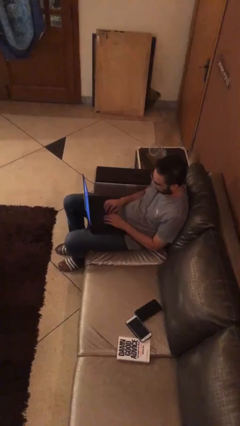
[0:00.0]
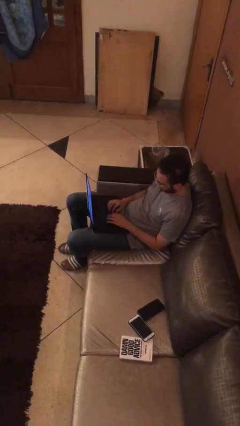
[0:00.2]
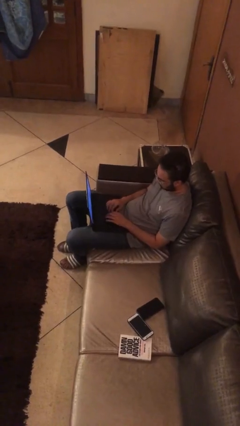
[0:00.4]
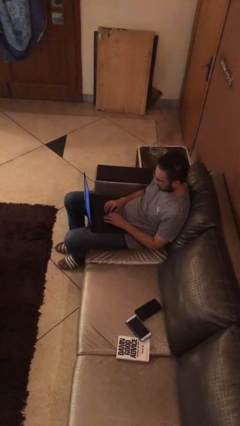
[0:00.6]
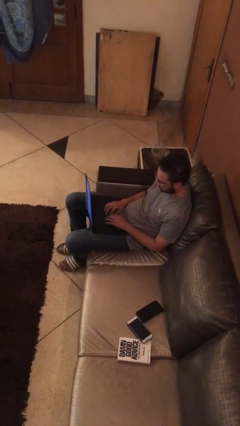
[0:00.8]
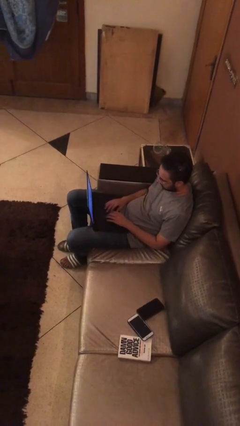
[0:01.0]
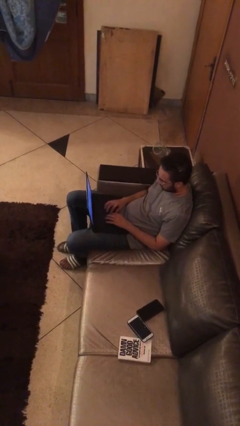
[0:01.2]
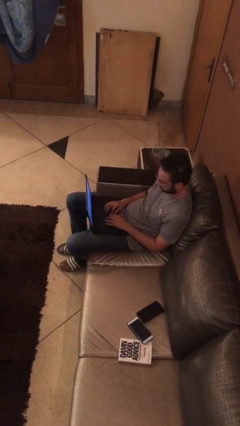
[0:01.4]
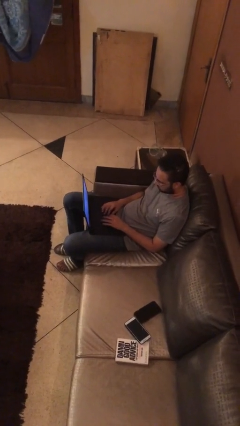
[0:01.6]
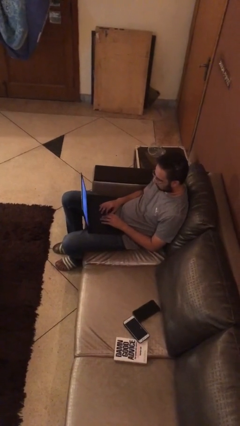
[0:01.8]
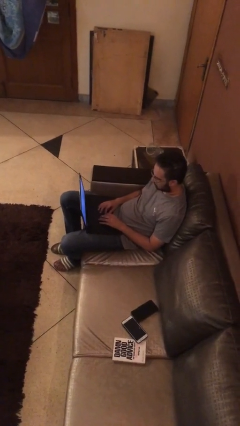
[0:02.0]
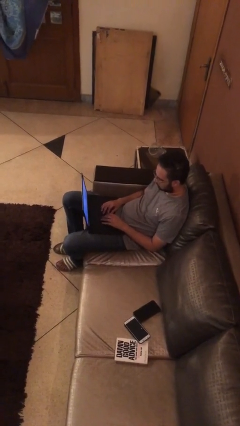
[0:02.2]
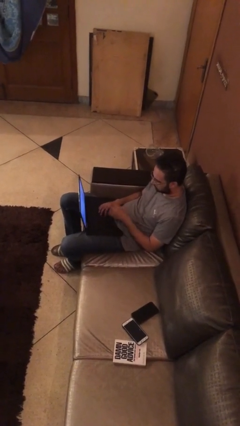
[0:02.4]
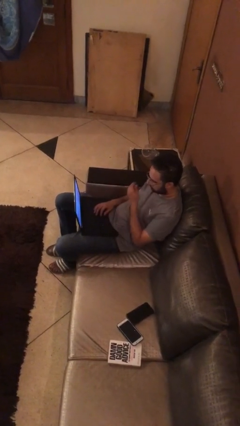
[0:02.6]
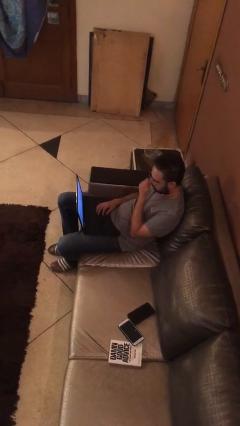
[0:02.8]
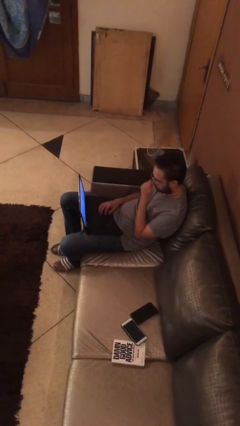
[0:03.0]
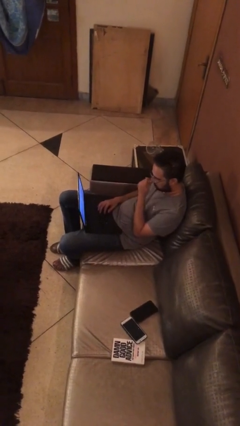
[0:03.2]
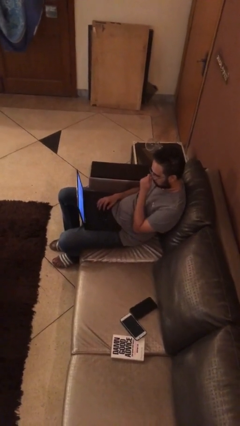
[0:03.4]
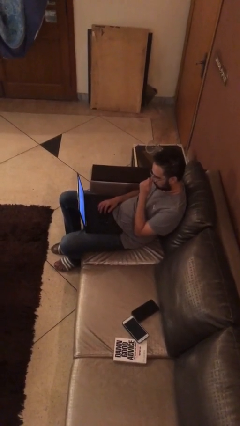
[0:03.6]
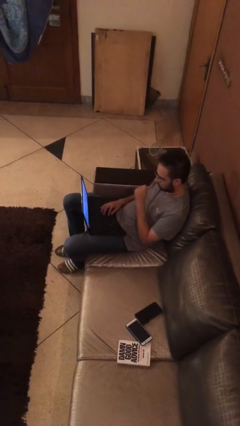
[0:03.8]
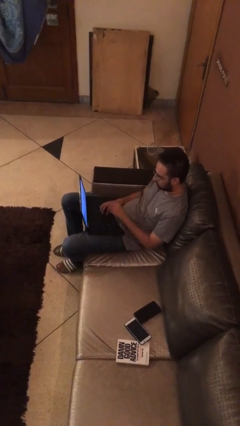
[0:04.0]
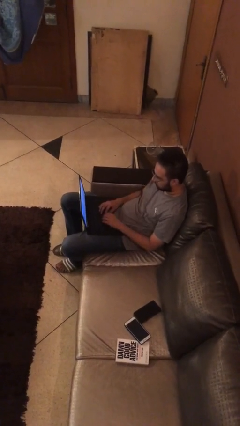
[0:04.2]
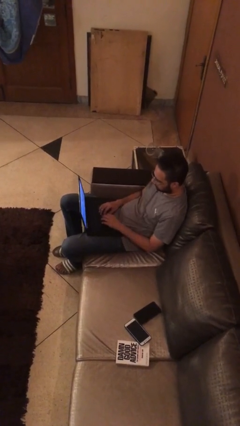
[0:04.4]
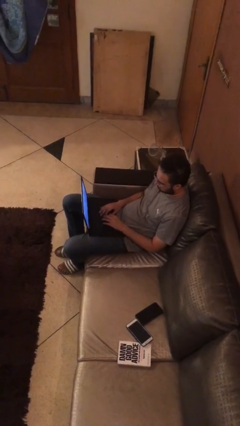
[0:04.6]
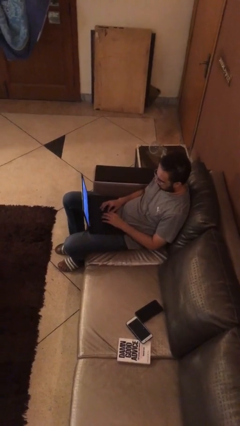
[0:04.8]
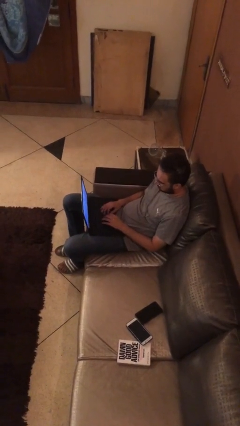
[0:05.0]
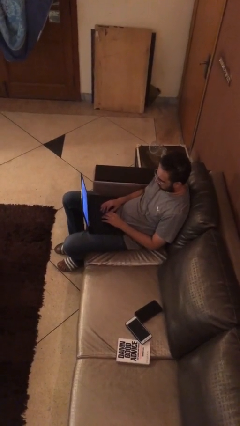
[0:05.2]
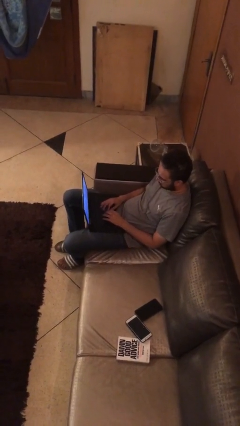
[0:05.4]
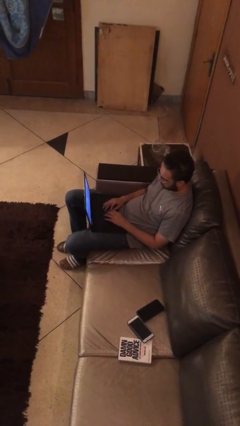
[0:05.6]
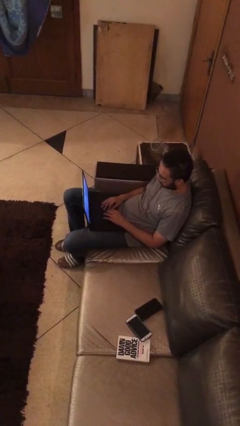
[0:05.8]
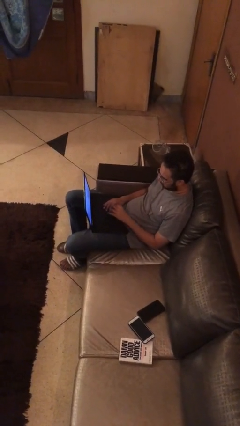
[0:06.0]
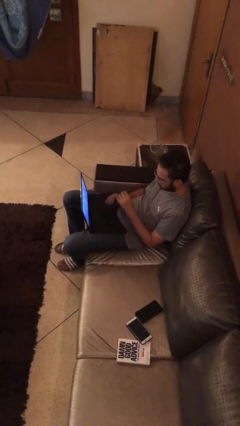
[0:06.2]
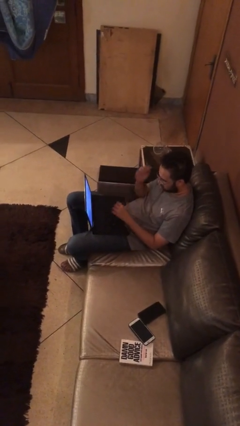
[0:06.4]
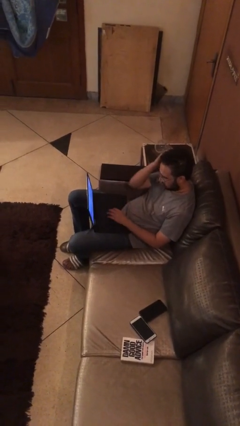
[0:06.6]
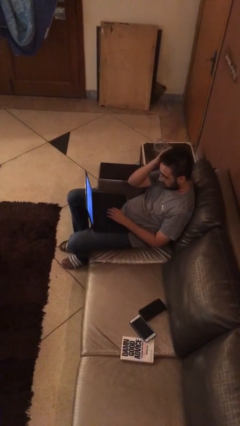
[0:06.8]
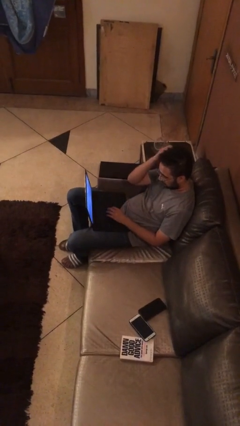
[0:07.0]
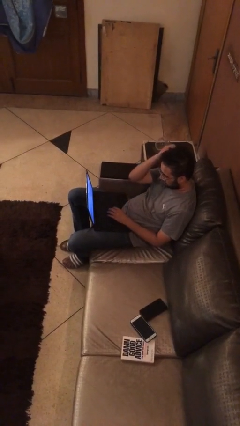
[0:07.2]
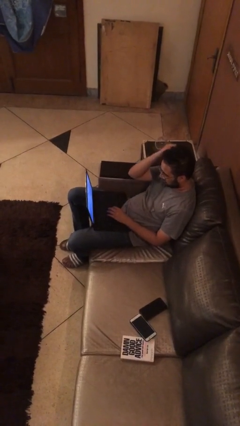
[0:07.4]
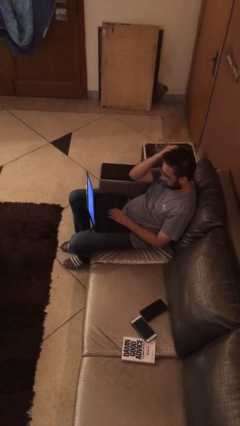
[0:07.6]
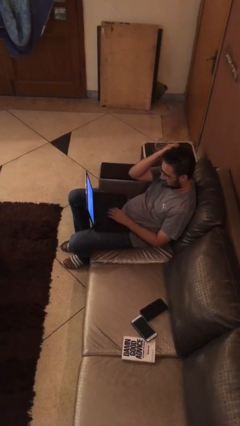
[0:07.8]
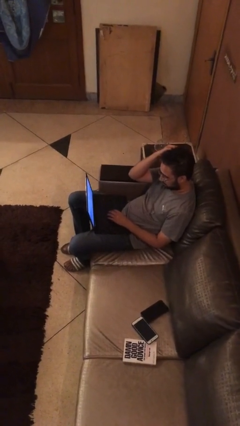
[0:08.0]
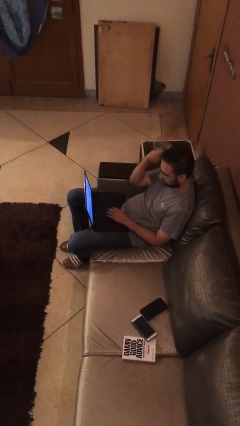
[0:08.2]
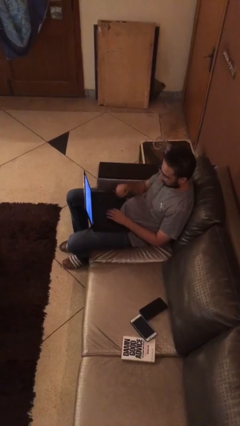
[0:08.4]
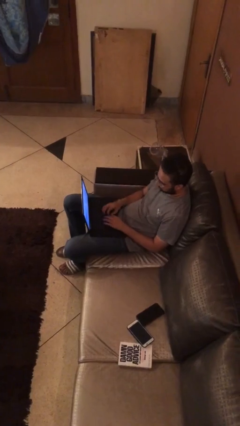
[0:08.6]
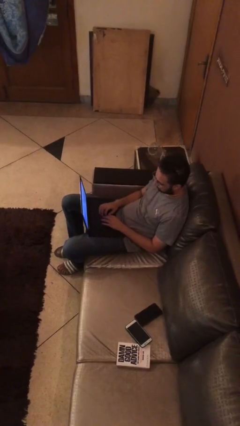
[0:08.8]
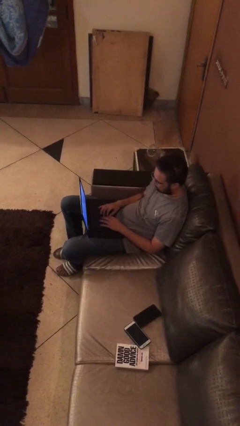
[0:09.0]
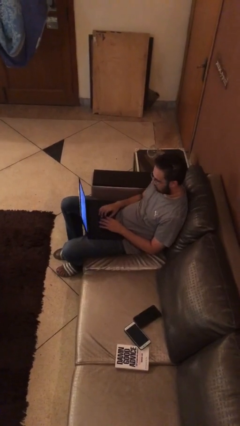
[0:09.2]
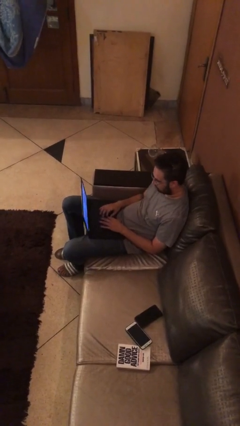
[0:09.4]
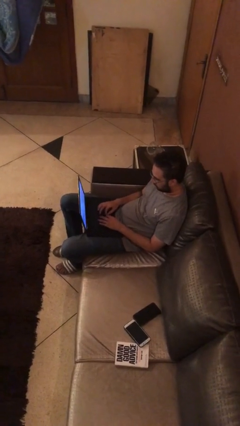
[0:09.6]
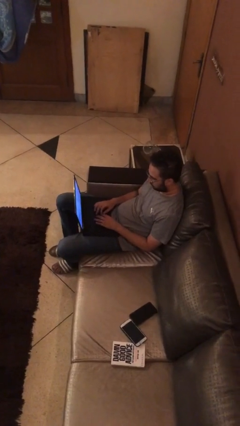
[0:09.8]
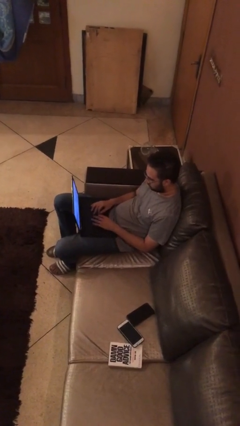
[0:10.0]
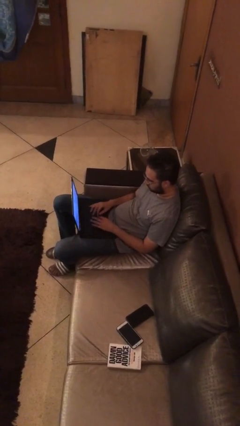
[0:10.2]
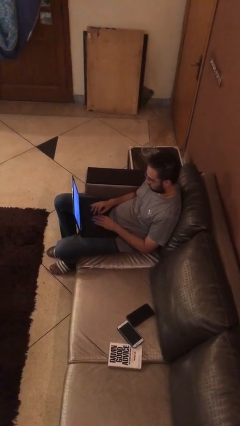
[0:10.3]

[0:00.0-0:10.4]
person interacts with laptop

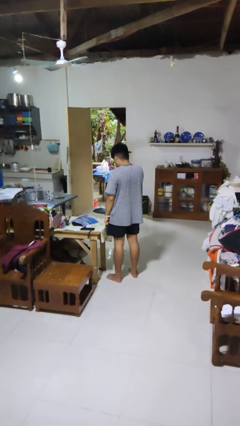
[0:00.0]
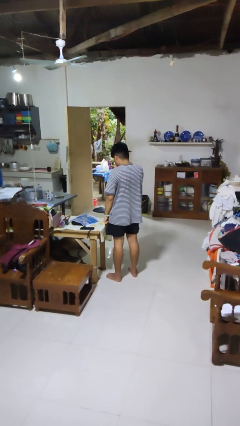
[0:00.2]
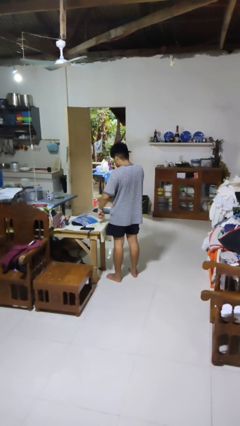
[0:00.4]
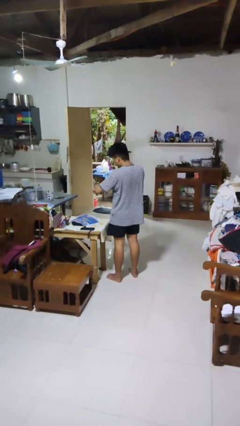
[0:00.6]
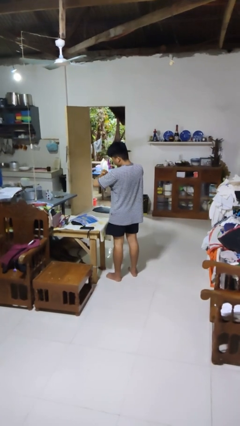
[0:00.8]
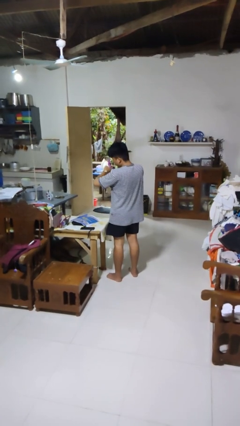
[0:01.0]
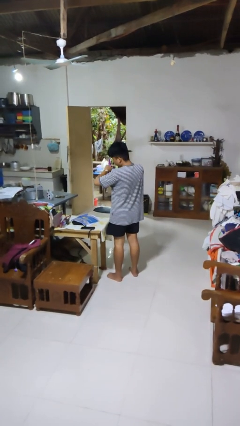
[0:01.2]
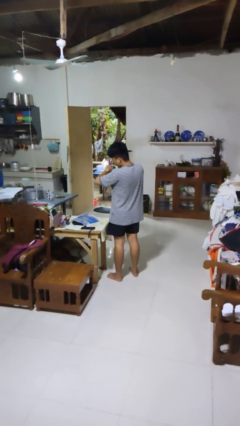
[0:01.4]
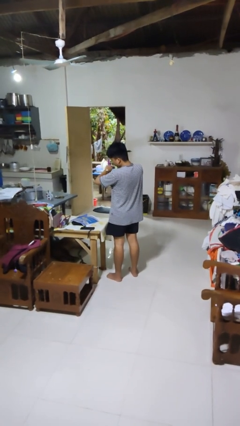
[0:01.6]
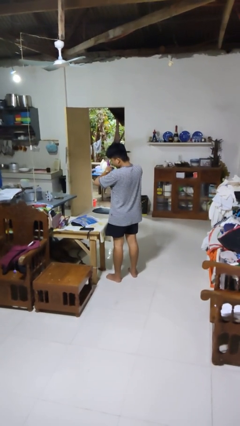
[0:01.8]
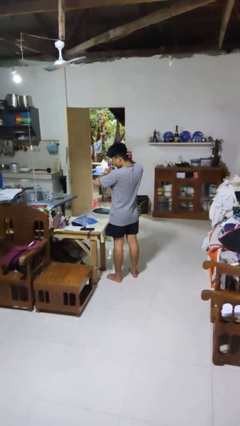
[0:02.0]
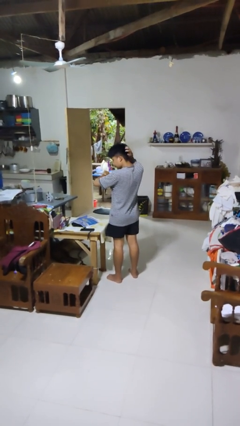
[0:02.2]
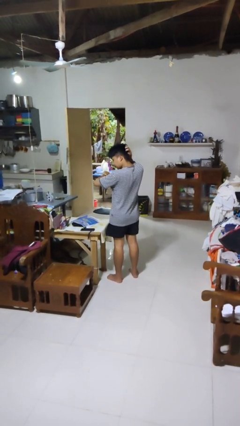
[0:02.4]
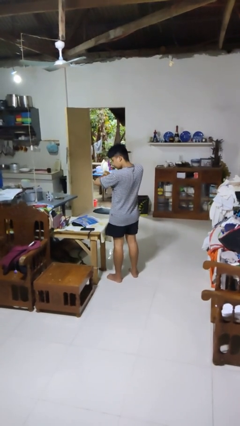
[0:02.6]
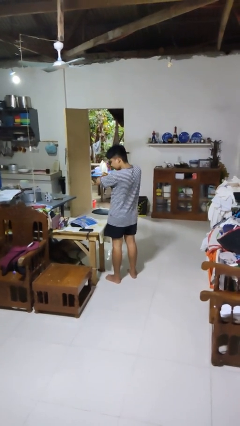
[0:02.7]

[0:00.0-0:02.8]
person looks at wristwatch

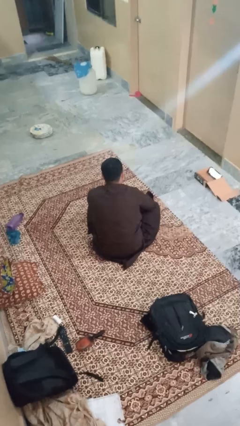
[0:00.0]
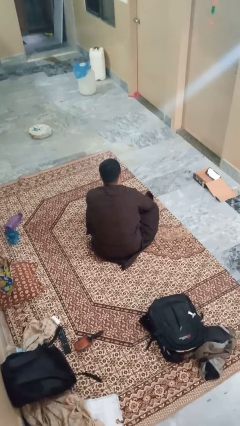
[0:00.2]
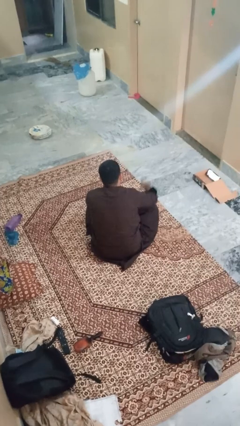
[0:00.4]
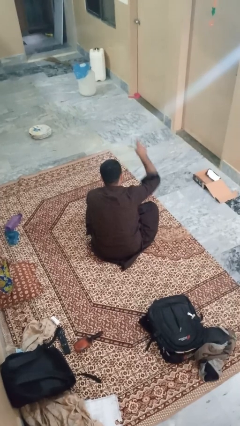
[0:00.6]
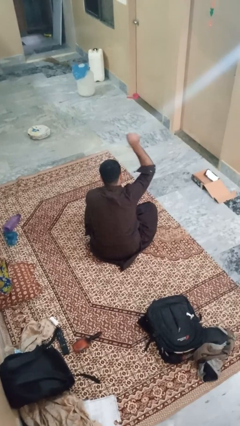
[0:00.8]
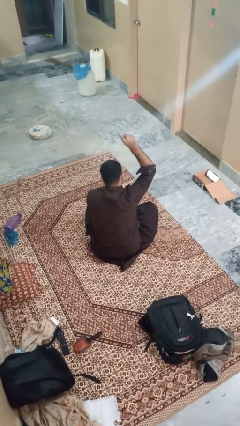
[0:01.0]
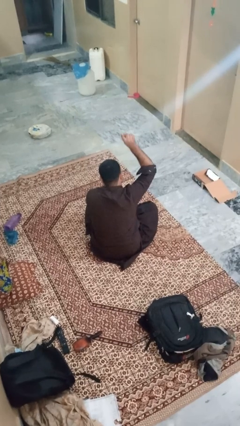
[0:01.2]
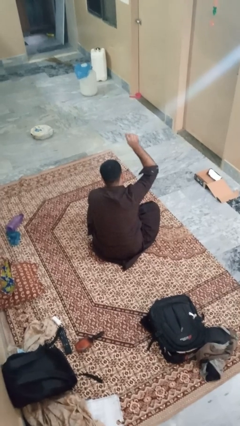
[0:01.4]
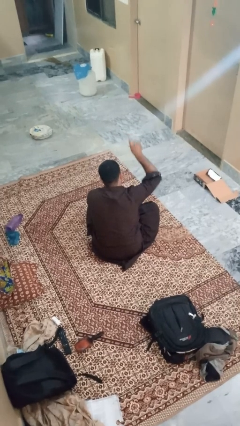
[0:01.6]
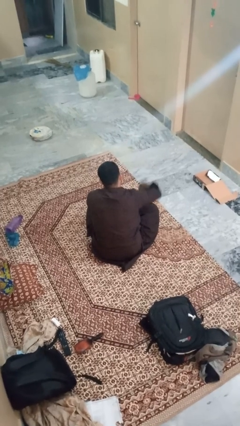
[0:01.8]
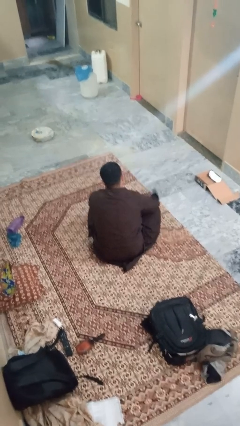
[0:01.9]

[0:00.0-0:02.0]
person gestures number one

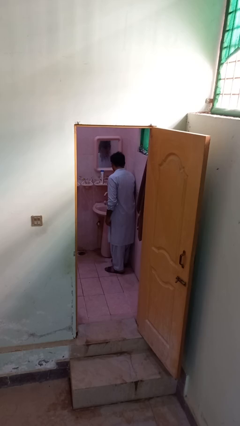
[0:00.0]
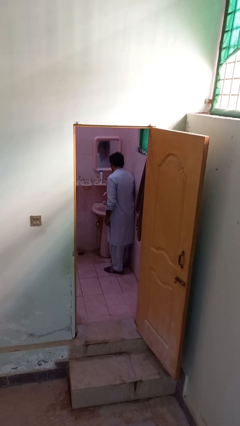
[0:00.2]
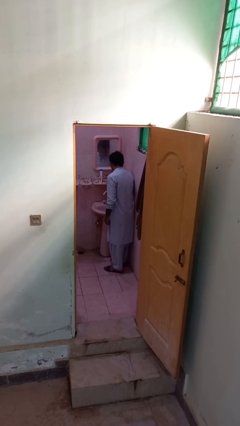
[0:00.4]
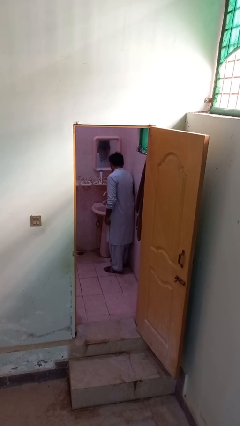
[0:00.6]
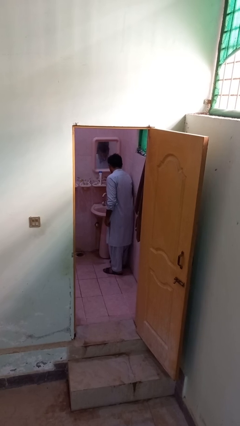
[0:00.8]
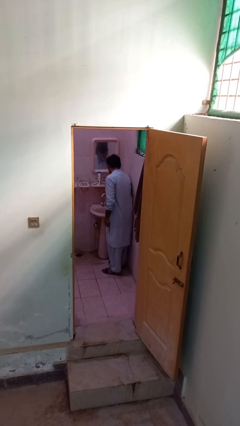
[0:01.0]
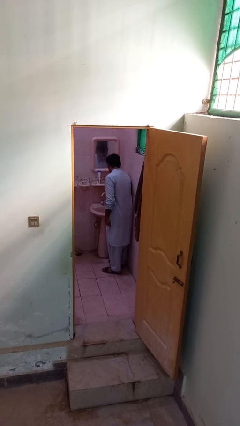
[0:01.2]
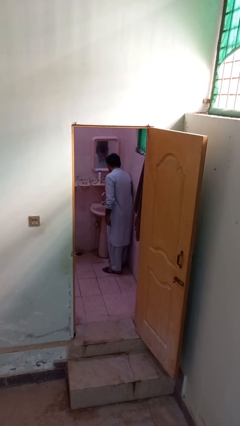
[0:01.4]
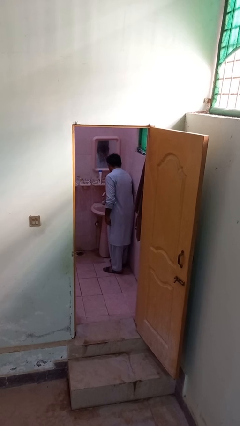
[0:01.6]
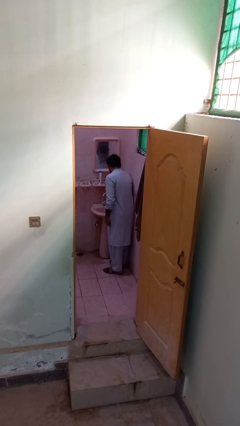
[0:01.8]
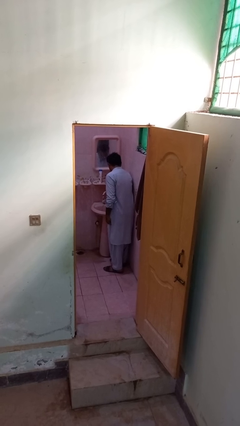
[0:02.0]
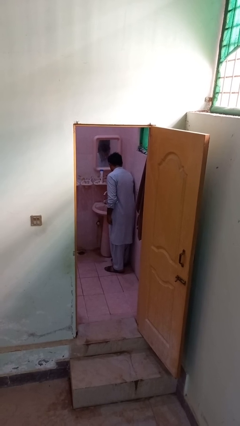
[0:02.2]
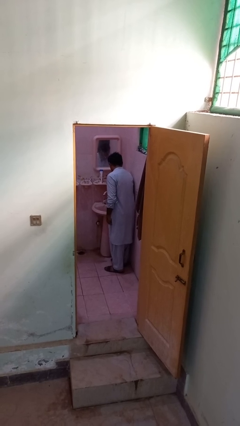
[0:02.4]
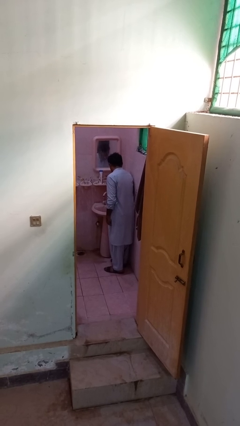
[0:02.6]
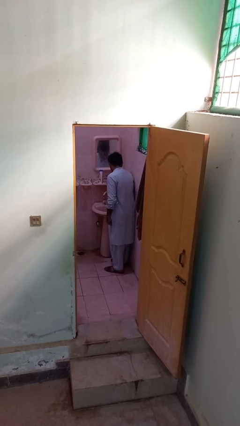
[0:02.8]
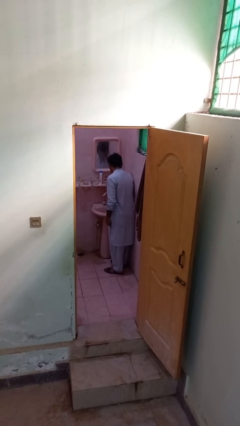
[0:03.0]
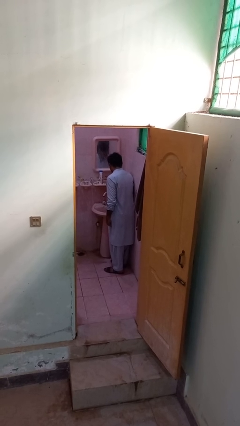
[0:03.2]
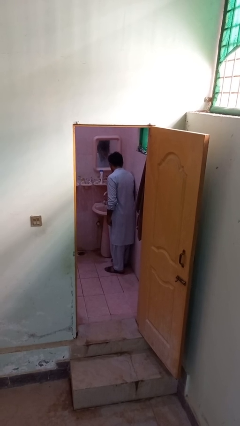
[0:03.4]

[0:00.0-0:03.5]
person turns on faucet
